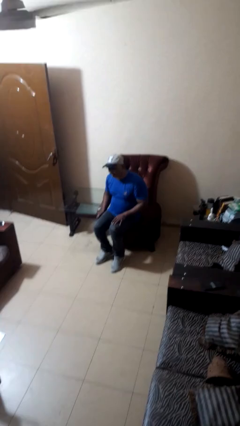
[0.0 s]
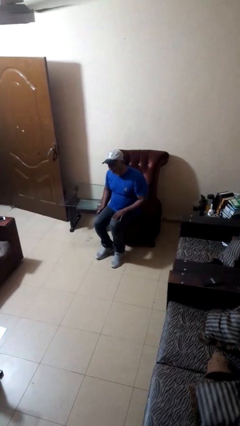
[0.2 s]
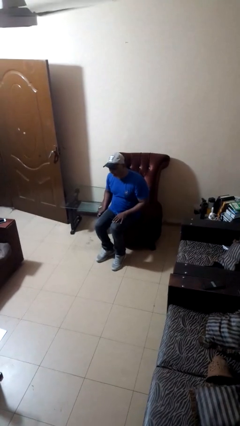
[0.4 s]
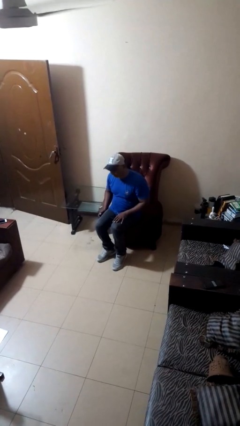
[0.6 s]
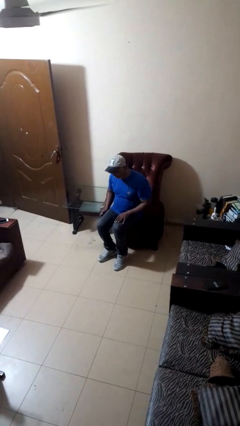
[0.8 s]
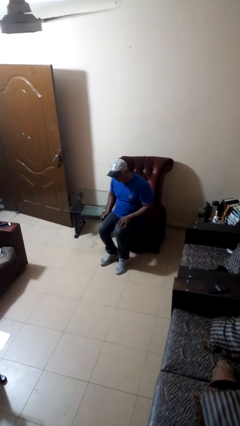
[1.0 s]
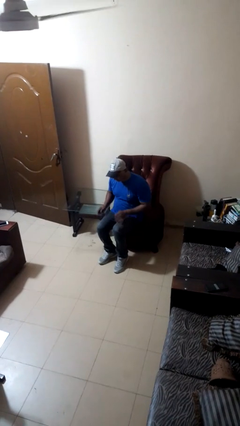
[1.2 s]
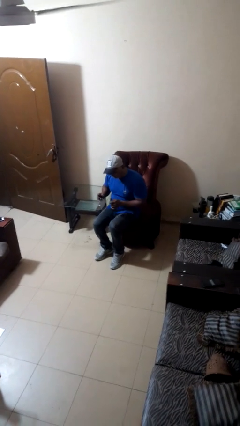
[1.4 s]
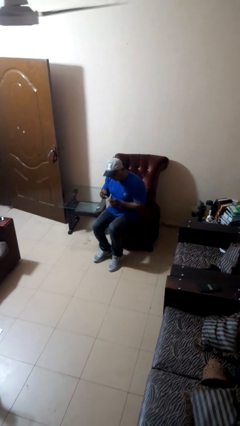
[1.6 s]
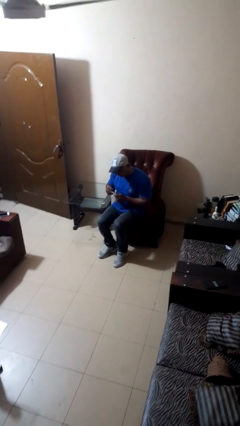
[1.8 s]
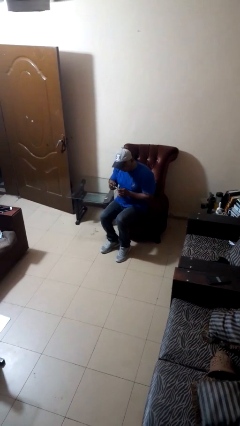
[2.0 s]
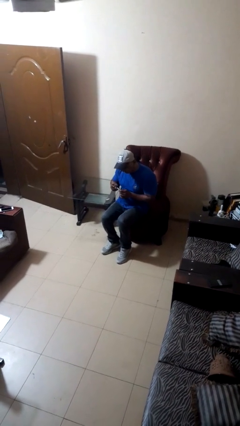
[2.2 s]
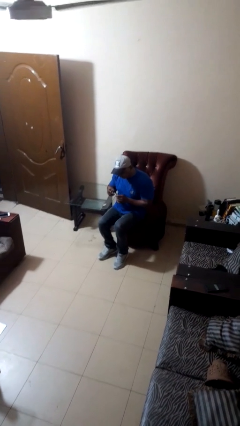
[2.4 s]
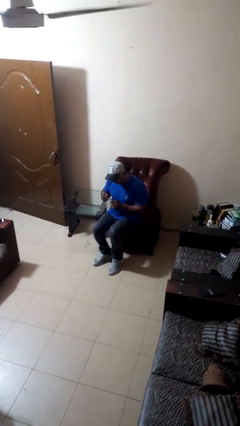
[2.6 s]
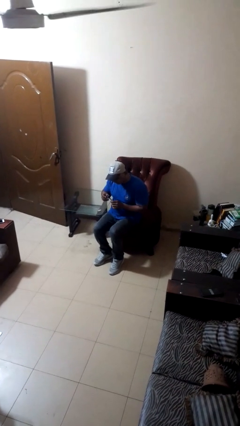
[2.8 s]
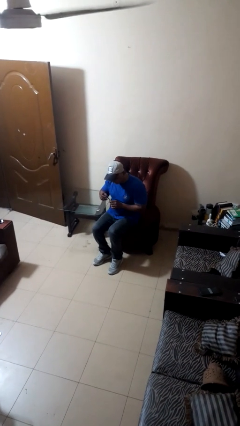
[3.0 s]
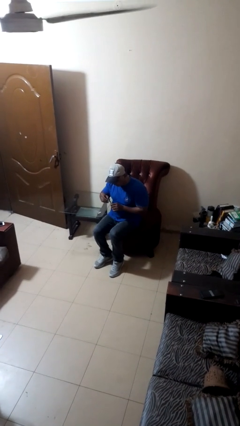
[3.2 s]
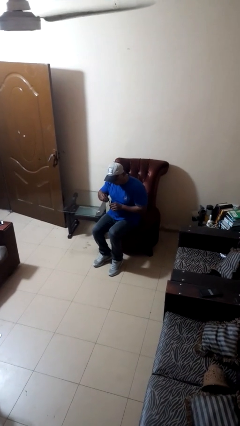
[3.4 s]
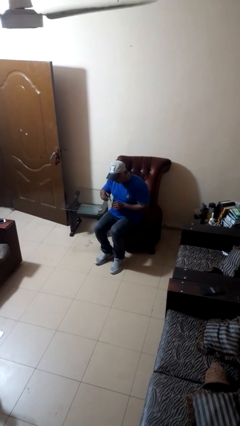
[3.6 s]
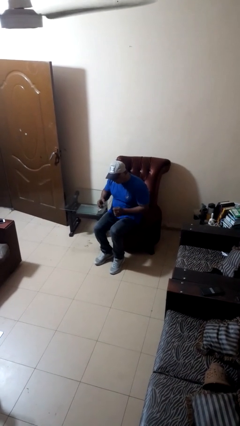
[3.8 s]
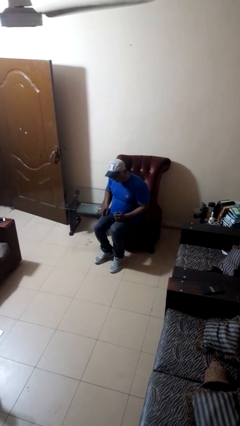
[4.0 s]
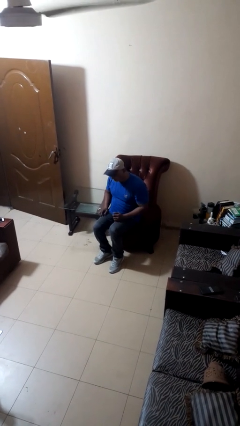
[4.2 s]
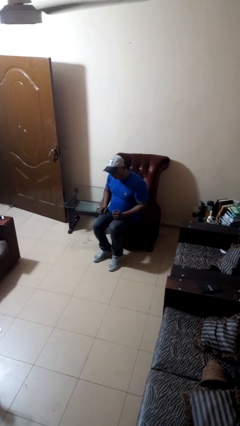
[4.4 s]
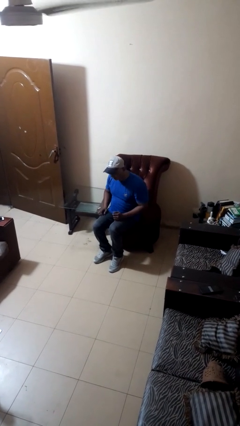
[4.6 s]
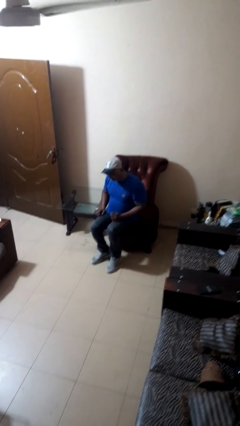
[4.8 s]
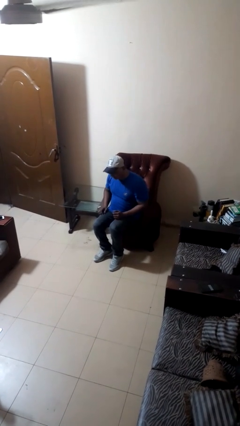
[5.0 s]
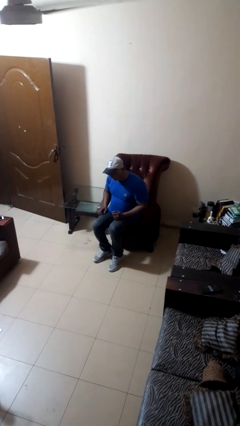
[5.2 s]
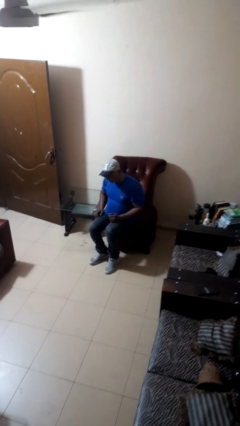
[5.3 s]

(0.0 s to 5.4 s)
person clips fingernails

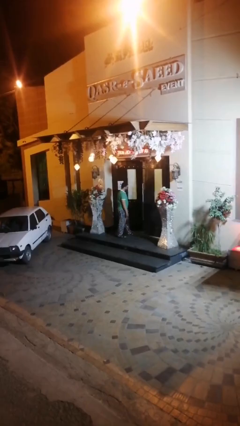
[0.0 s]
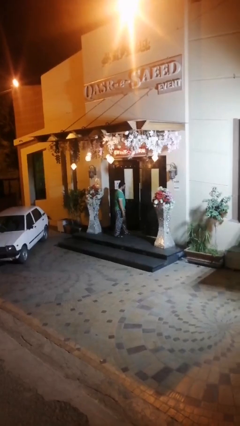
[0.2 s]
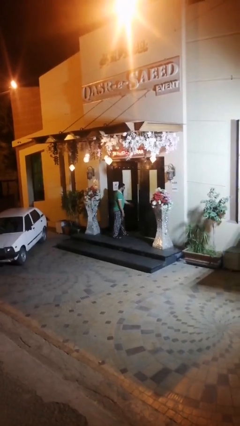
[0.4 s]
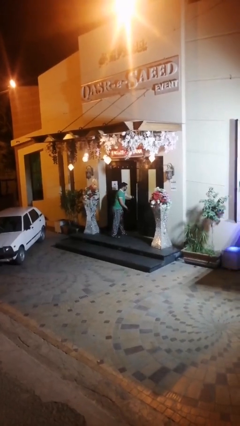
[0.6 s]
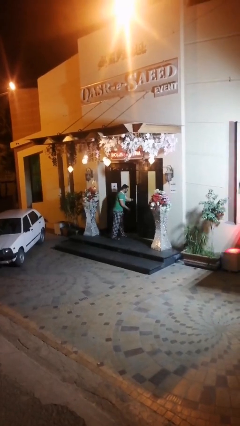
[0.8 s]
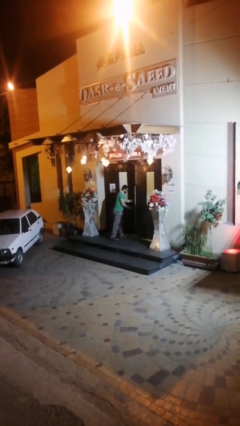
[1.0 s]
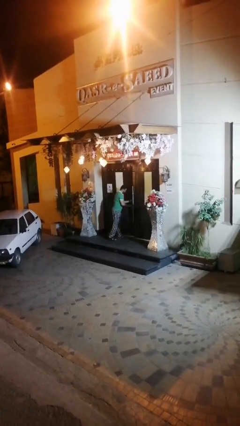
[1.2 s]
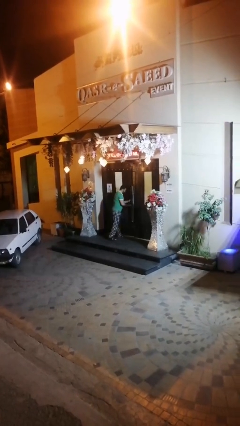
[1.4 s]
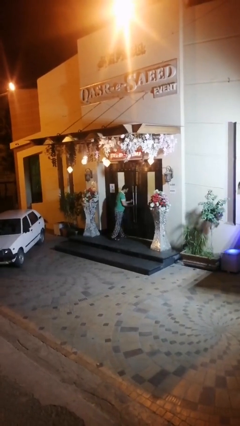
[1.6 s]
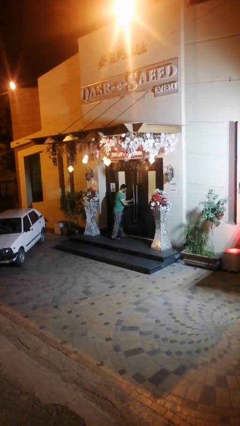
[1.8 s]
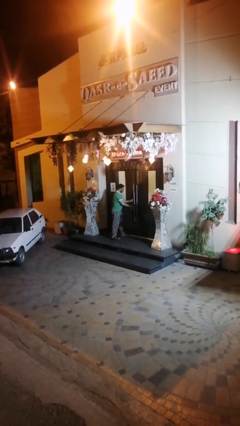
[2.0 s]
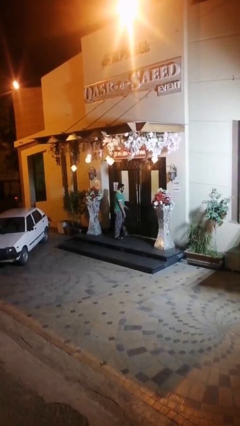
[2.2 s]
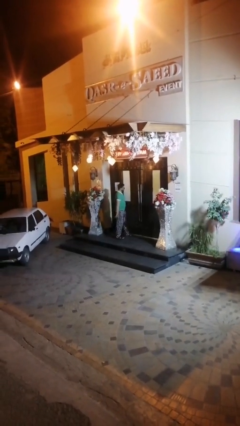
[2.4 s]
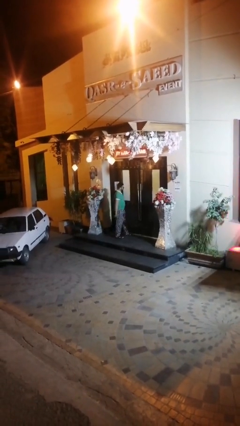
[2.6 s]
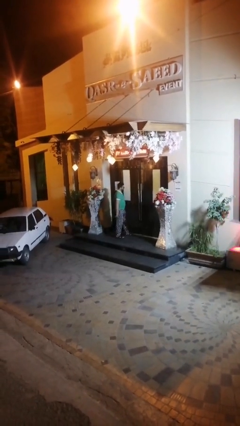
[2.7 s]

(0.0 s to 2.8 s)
person closes facility door

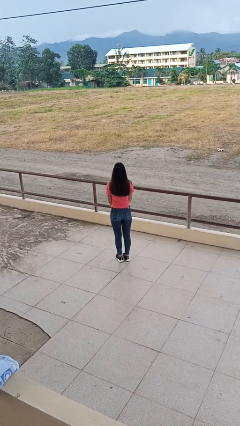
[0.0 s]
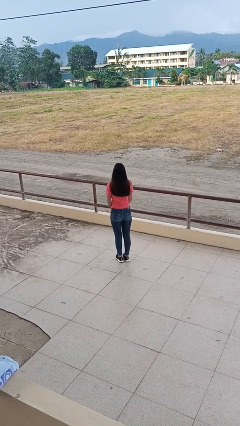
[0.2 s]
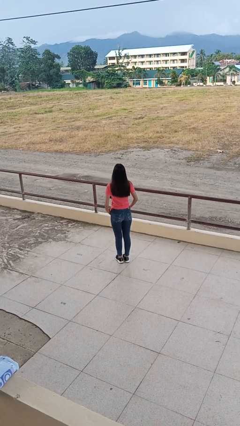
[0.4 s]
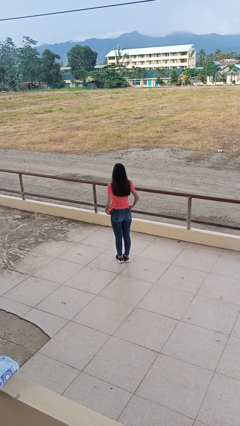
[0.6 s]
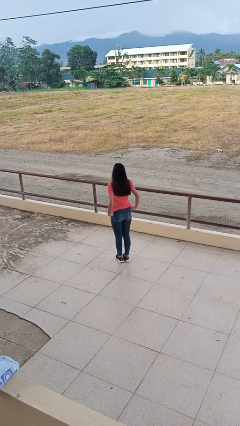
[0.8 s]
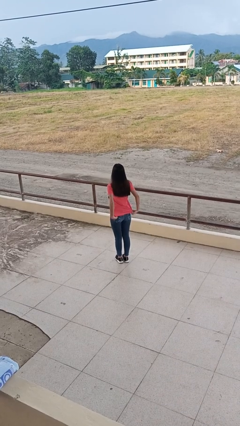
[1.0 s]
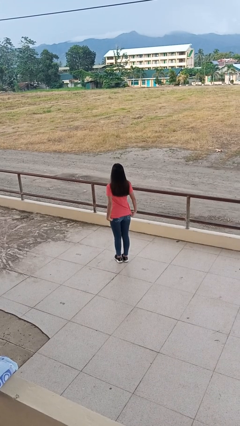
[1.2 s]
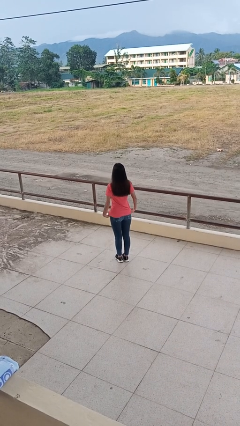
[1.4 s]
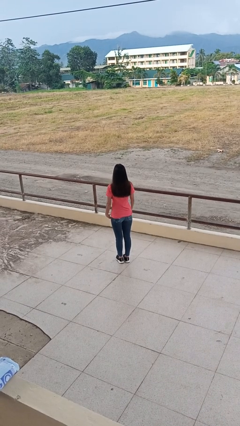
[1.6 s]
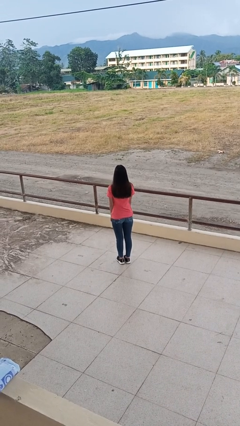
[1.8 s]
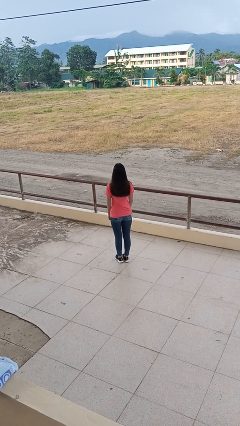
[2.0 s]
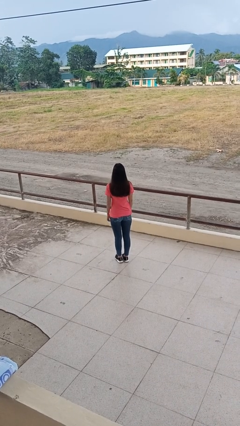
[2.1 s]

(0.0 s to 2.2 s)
person untucks shirt

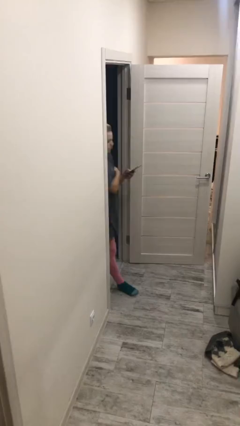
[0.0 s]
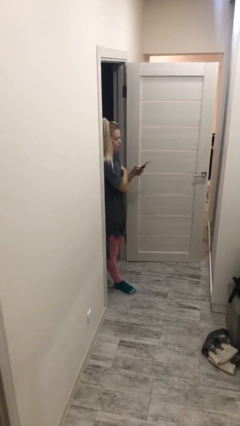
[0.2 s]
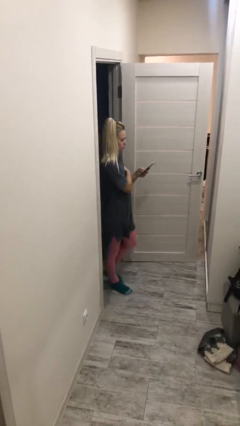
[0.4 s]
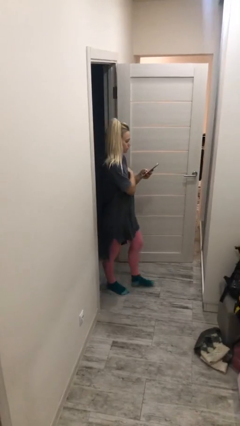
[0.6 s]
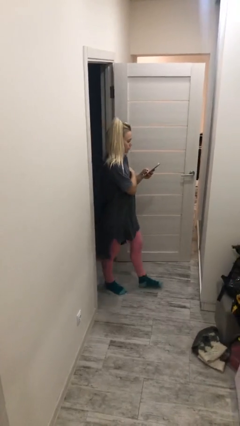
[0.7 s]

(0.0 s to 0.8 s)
person enters scene through structure

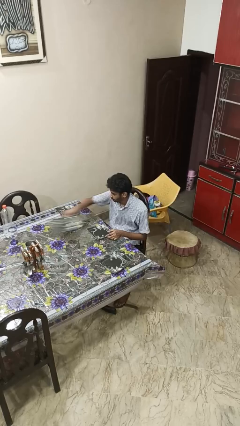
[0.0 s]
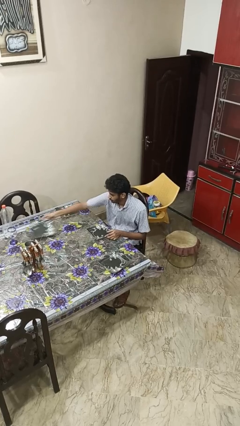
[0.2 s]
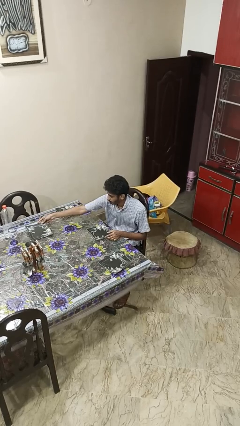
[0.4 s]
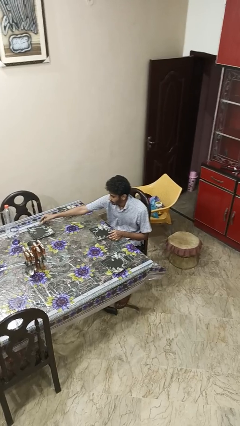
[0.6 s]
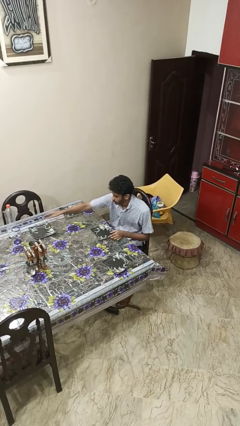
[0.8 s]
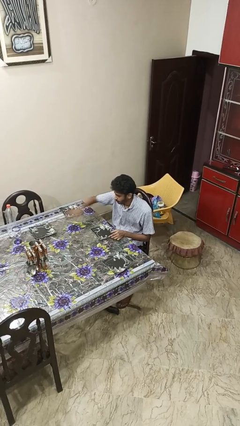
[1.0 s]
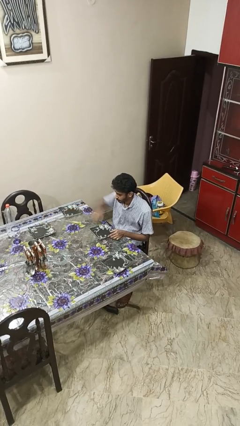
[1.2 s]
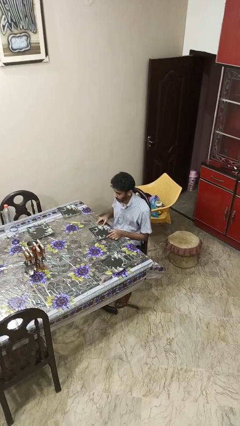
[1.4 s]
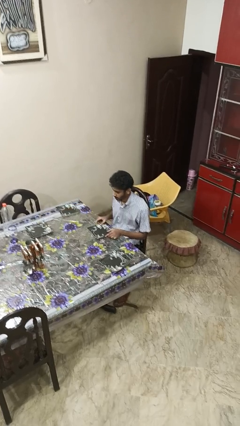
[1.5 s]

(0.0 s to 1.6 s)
person sets table

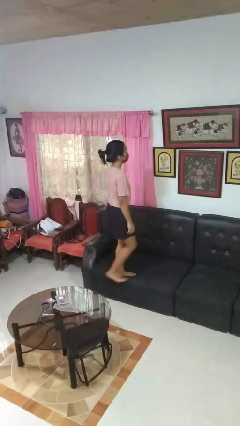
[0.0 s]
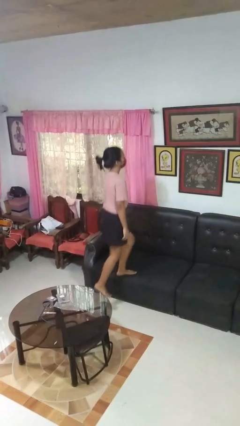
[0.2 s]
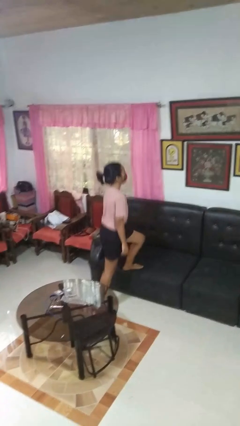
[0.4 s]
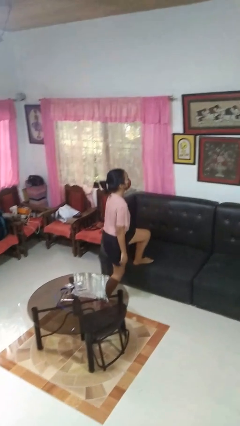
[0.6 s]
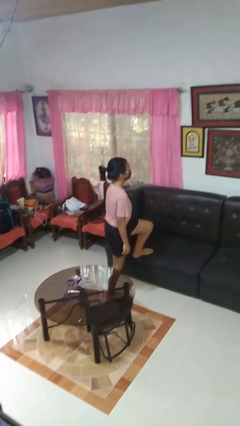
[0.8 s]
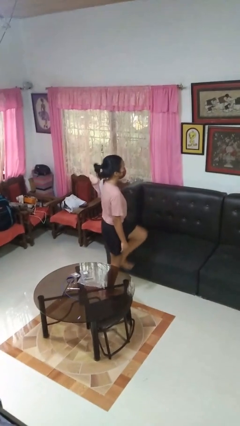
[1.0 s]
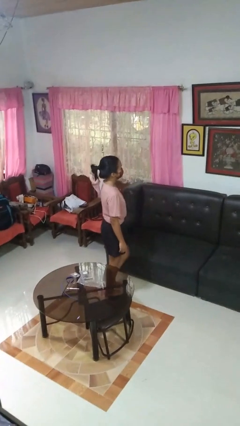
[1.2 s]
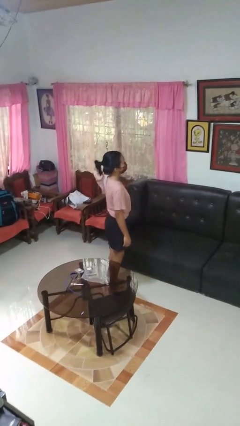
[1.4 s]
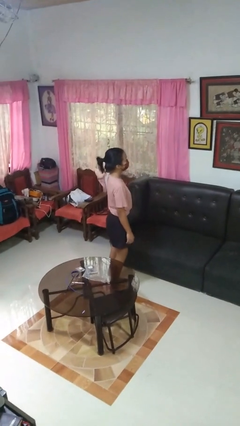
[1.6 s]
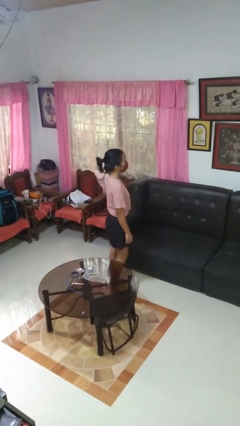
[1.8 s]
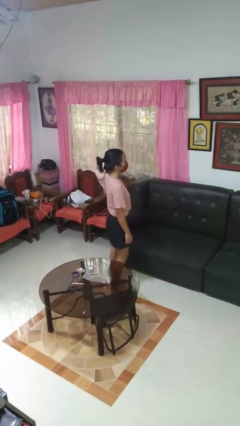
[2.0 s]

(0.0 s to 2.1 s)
person climbs off couch

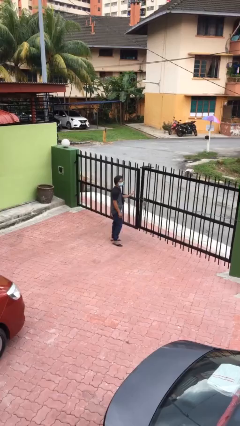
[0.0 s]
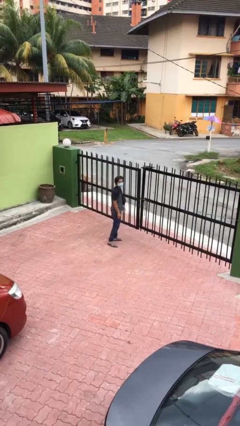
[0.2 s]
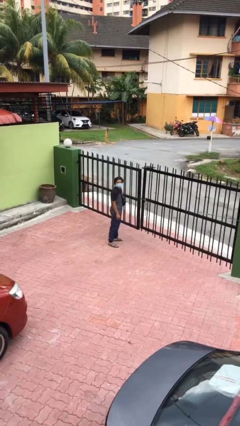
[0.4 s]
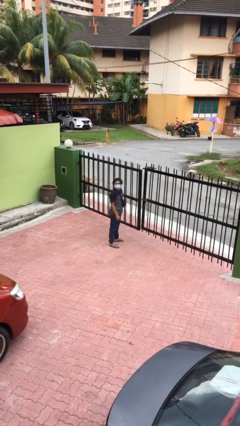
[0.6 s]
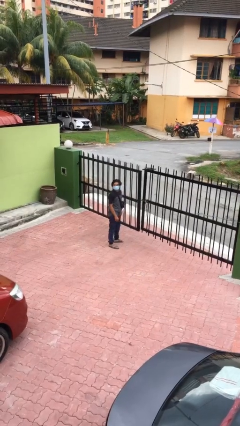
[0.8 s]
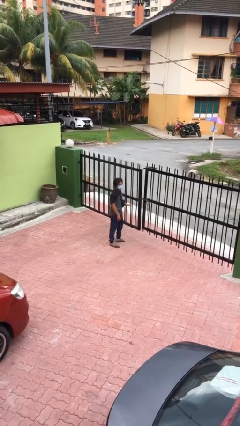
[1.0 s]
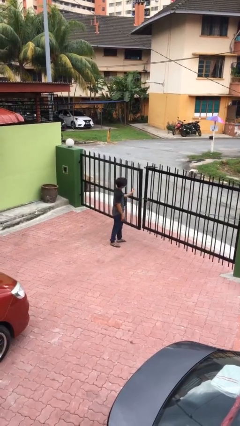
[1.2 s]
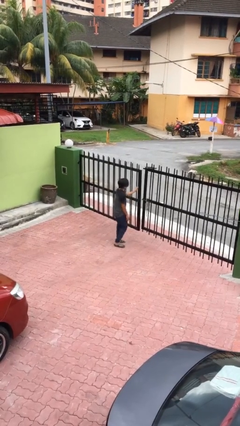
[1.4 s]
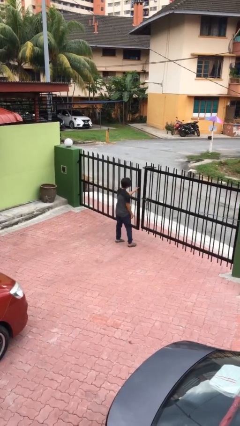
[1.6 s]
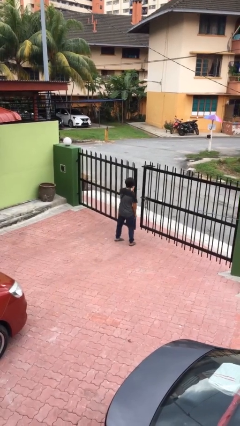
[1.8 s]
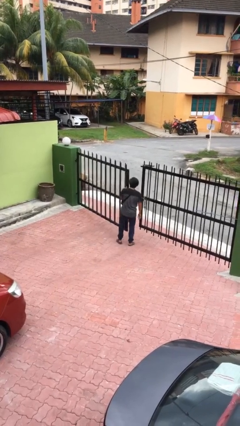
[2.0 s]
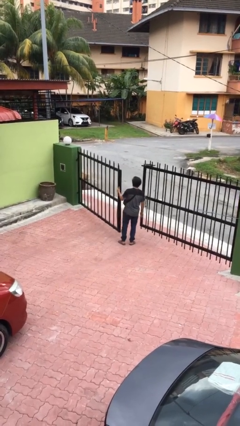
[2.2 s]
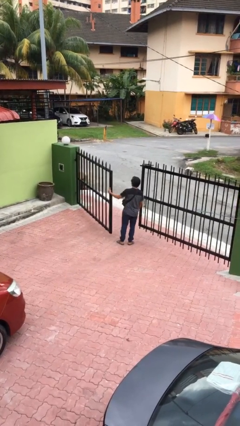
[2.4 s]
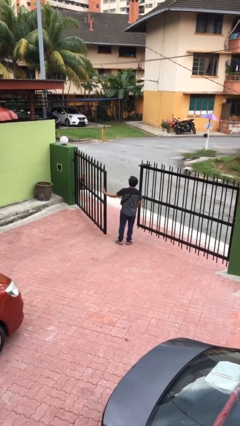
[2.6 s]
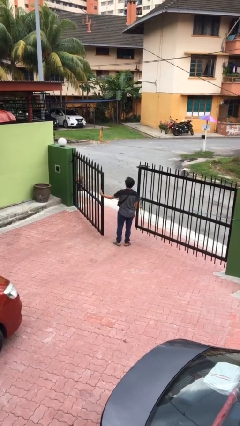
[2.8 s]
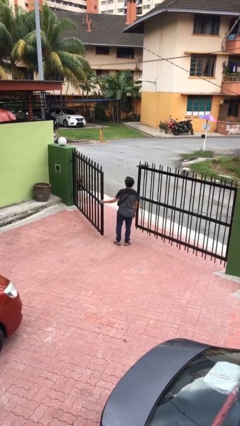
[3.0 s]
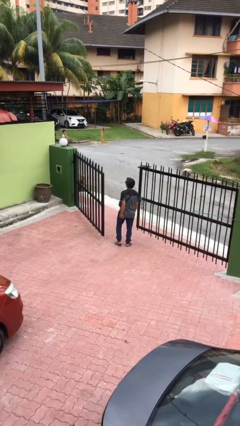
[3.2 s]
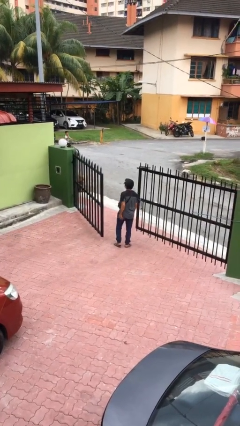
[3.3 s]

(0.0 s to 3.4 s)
person opens facility door
